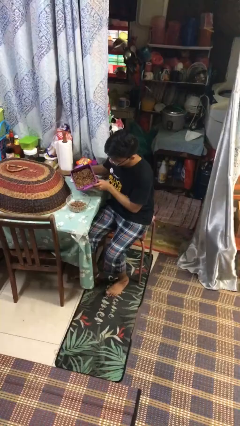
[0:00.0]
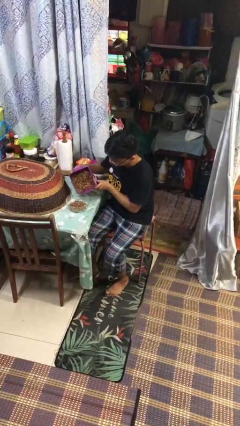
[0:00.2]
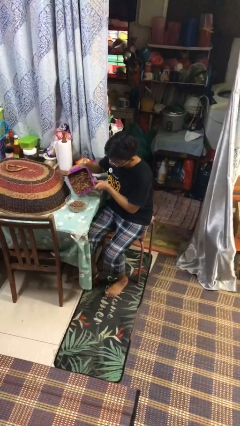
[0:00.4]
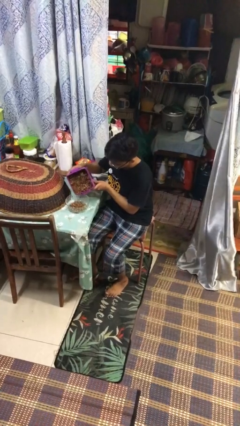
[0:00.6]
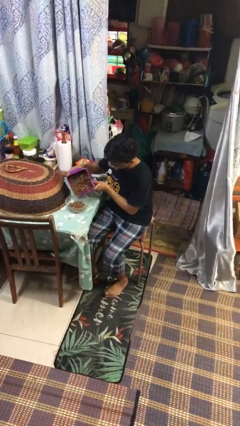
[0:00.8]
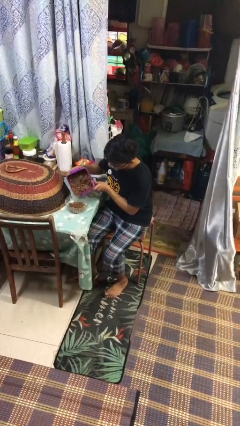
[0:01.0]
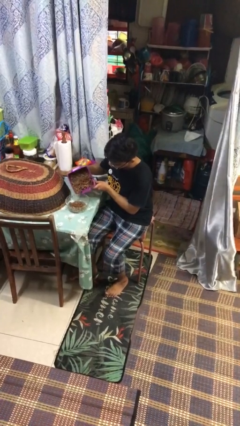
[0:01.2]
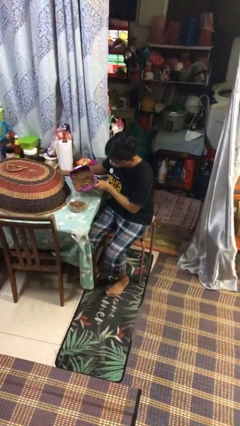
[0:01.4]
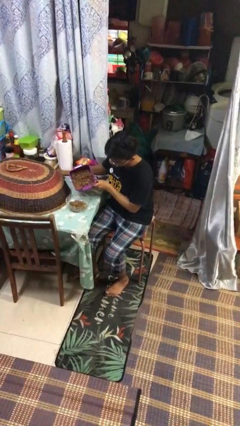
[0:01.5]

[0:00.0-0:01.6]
person pours into bowl

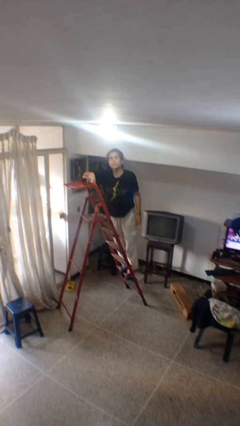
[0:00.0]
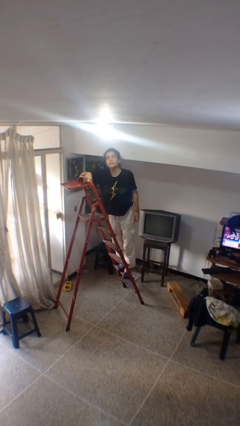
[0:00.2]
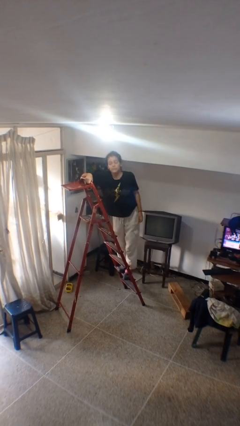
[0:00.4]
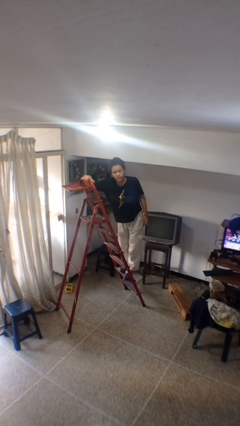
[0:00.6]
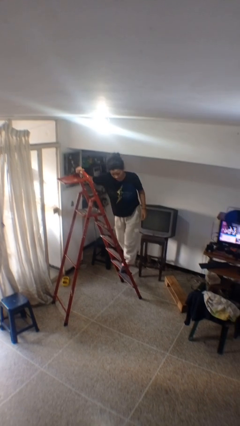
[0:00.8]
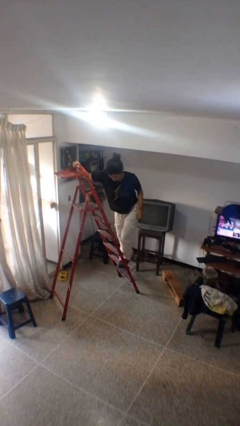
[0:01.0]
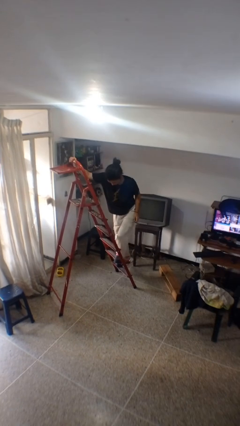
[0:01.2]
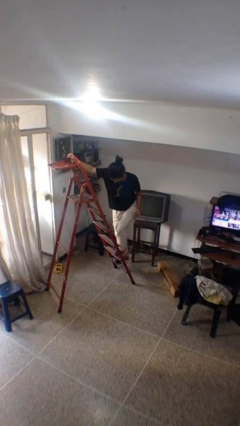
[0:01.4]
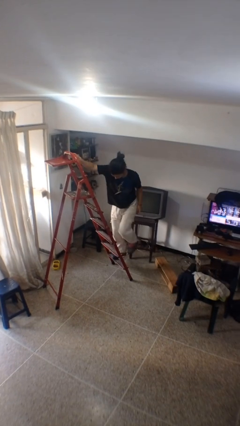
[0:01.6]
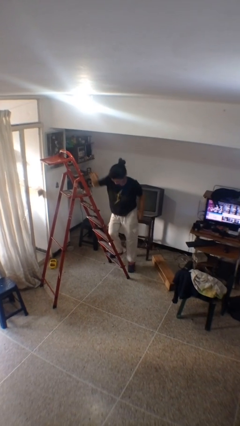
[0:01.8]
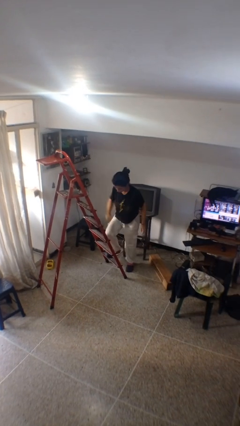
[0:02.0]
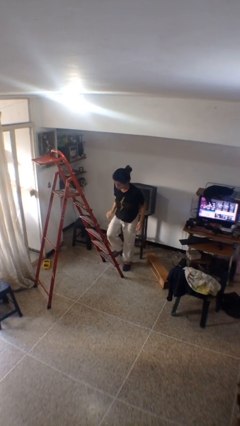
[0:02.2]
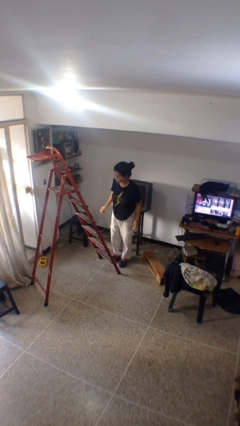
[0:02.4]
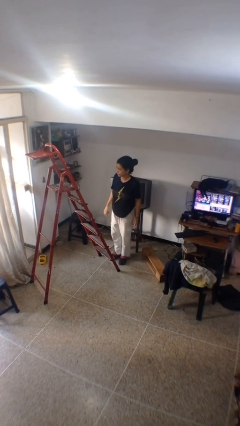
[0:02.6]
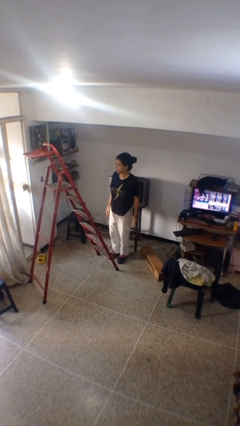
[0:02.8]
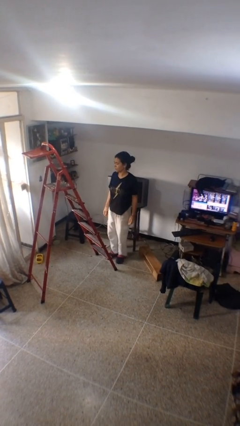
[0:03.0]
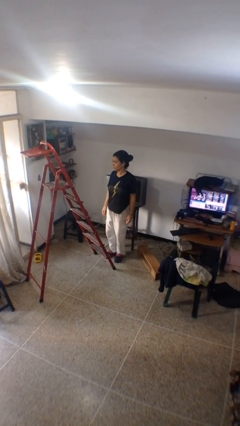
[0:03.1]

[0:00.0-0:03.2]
person climbs down ladder

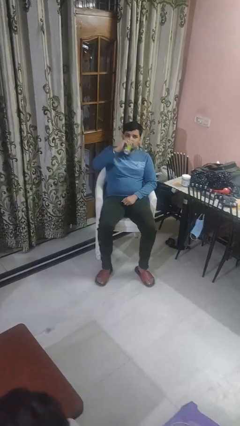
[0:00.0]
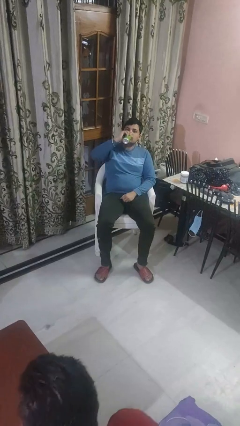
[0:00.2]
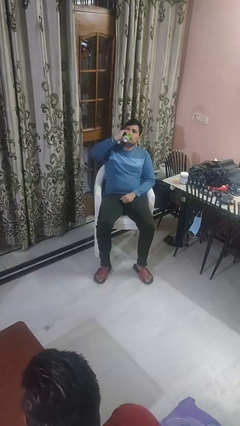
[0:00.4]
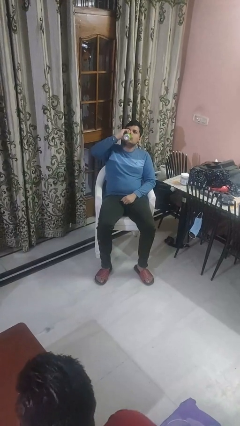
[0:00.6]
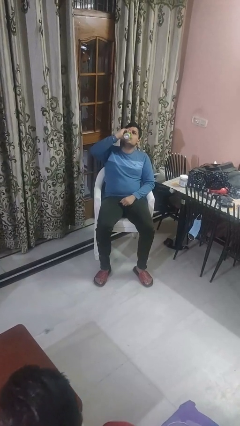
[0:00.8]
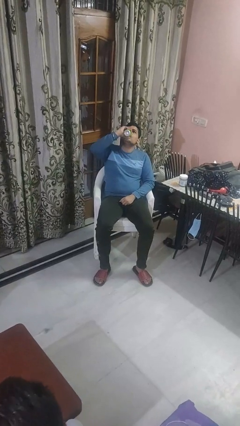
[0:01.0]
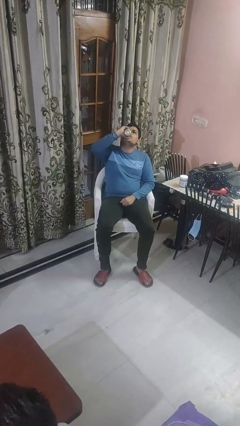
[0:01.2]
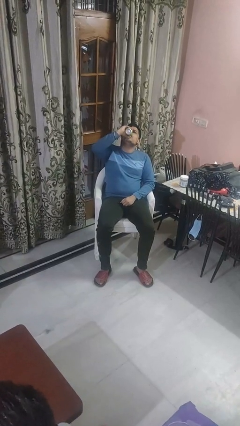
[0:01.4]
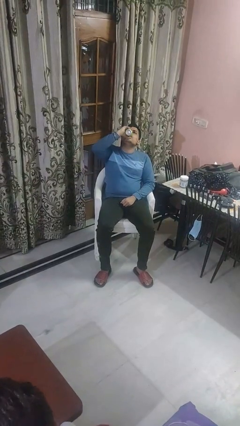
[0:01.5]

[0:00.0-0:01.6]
person drinks from beverage can

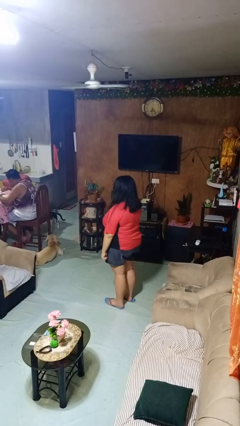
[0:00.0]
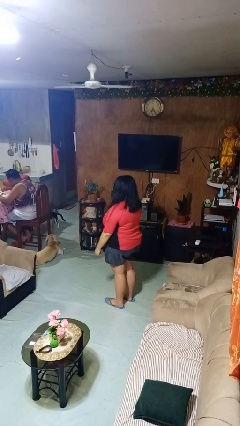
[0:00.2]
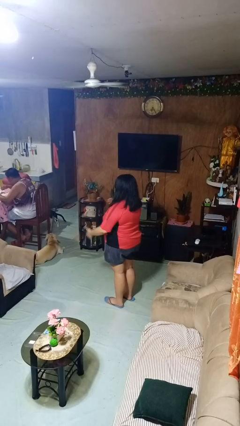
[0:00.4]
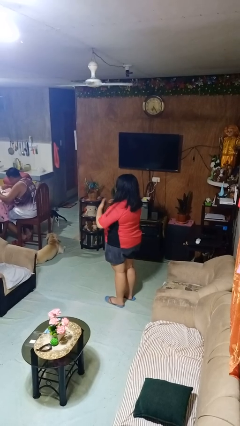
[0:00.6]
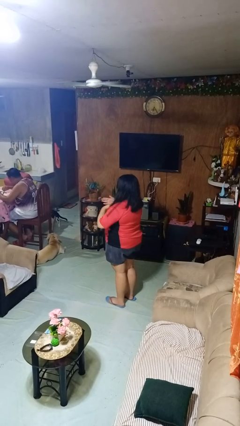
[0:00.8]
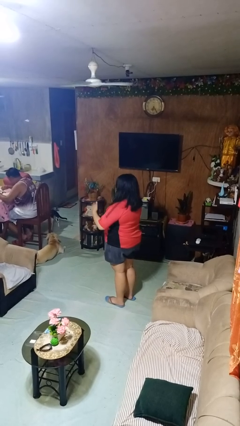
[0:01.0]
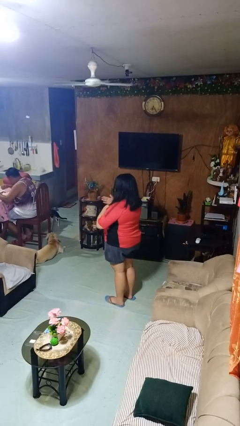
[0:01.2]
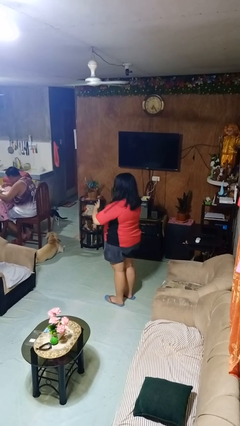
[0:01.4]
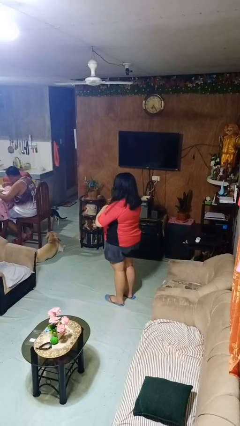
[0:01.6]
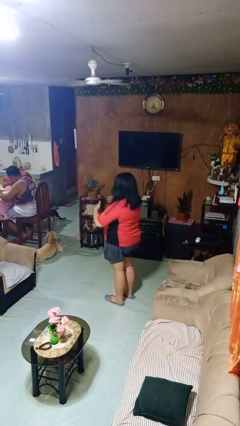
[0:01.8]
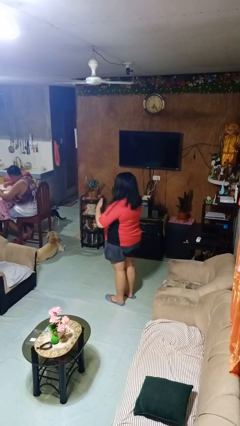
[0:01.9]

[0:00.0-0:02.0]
person drums on chest

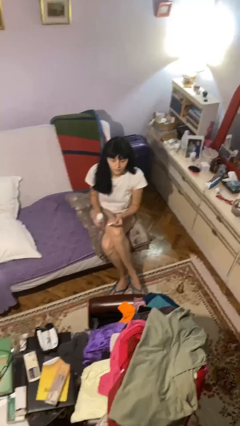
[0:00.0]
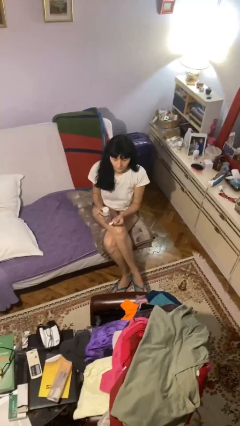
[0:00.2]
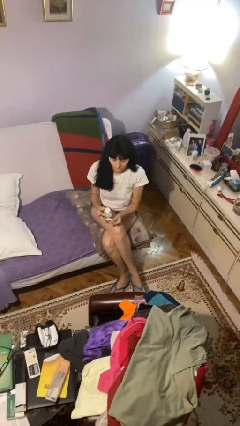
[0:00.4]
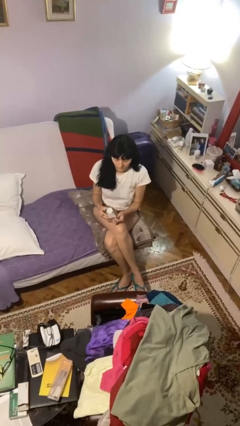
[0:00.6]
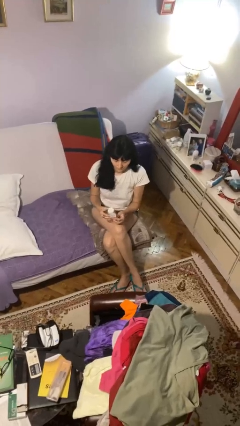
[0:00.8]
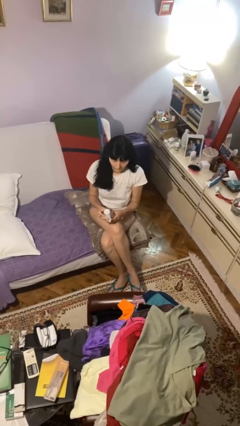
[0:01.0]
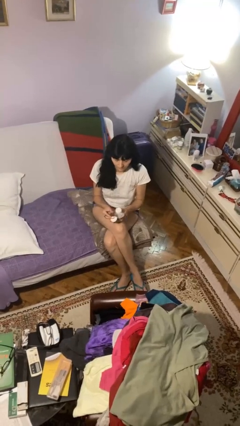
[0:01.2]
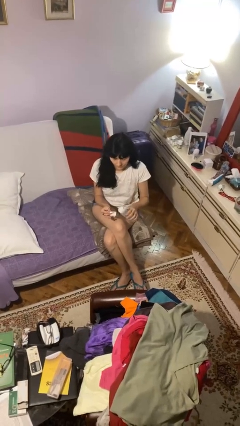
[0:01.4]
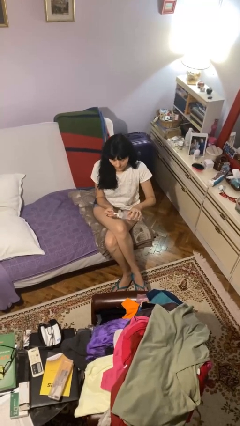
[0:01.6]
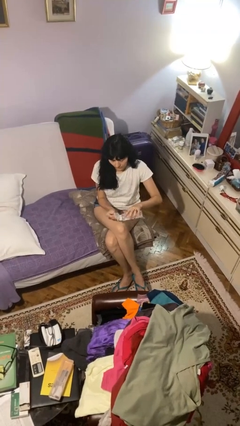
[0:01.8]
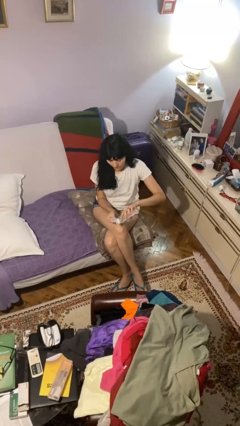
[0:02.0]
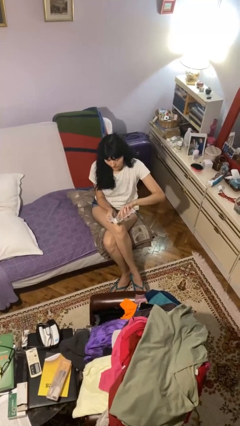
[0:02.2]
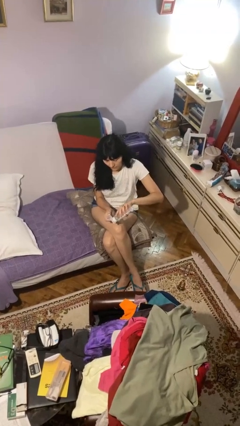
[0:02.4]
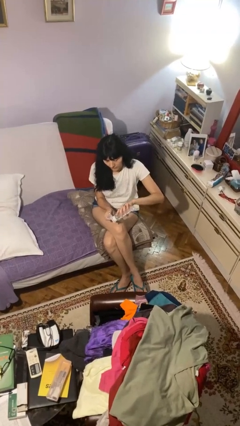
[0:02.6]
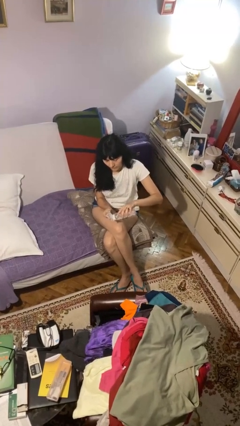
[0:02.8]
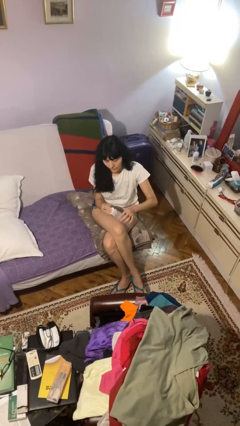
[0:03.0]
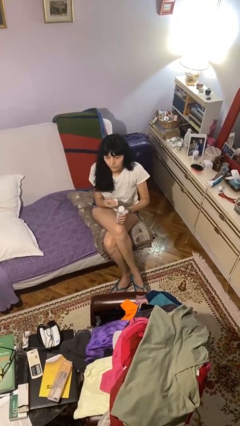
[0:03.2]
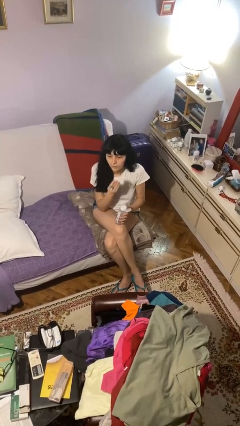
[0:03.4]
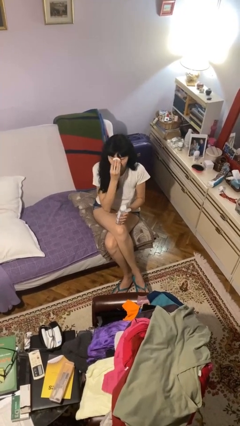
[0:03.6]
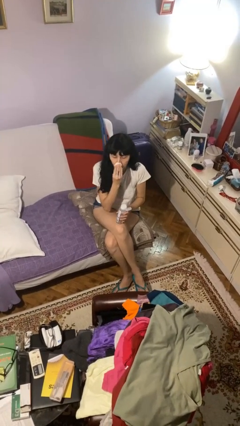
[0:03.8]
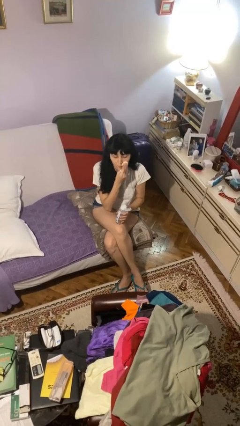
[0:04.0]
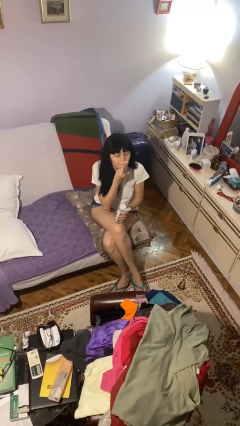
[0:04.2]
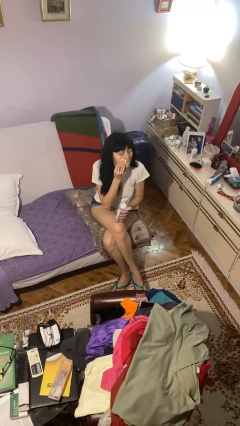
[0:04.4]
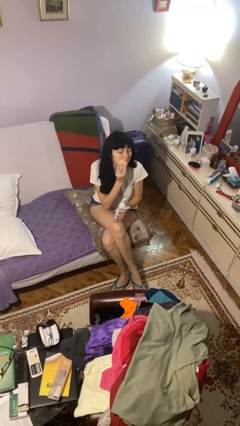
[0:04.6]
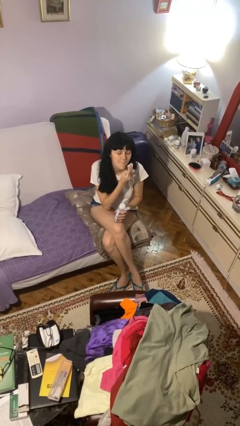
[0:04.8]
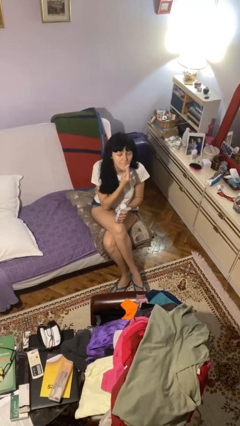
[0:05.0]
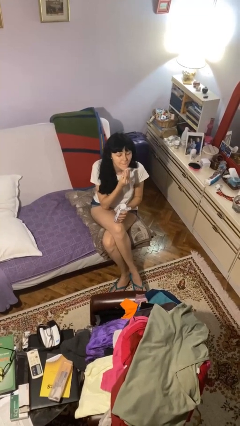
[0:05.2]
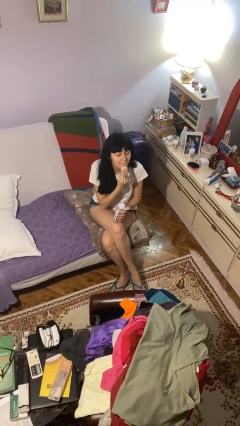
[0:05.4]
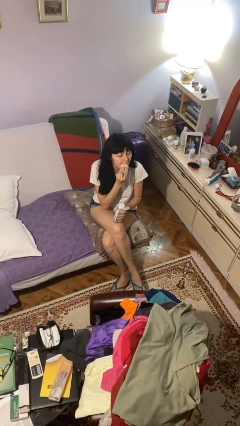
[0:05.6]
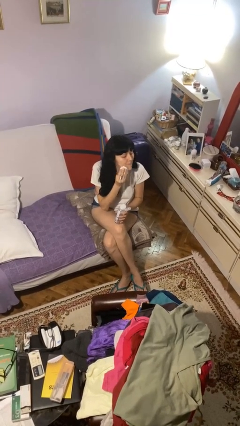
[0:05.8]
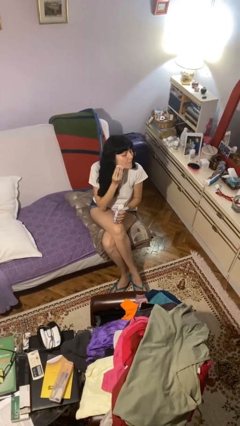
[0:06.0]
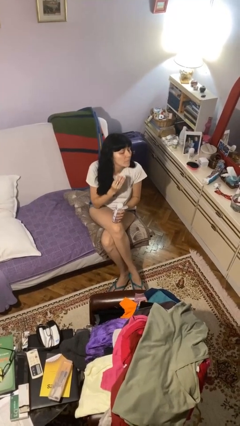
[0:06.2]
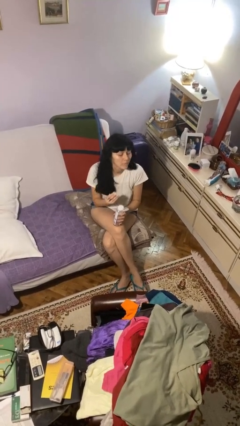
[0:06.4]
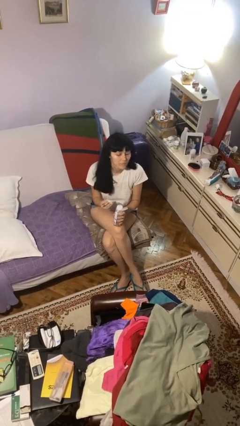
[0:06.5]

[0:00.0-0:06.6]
person applies facial moisturizer

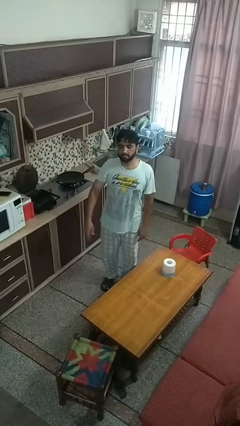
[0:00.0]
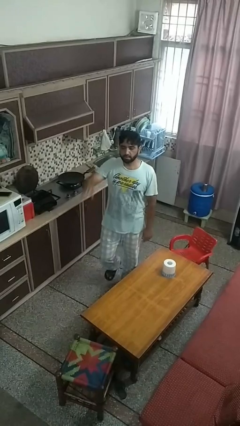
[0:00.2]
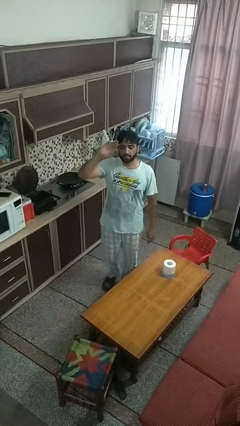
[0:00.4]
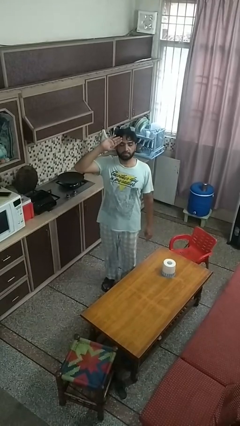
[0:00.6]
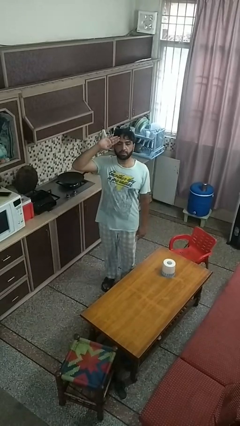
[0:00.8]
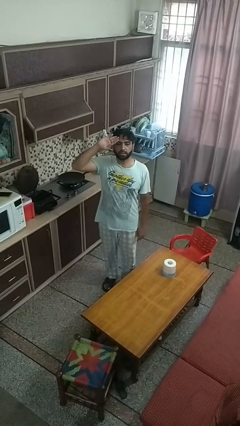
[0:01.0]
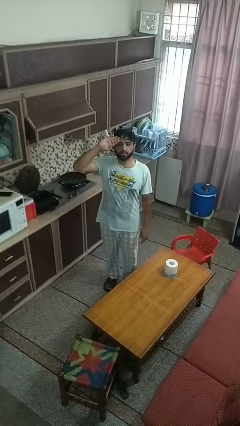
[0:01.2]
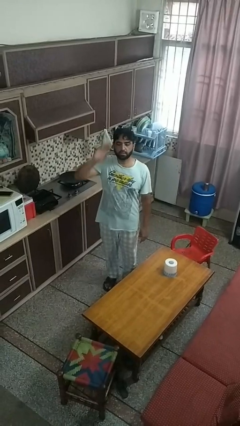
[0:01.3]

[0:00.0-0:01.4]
person salutes

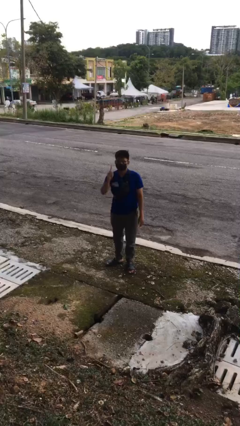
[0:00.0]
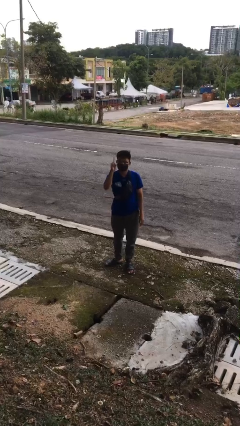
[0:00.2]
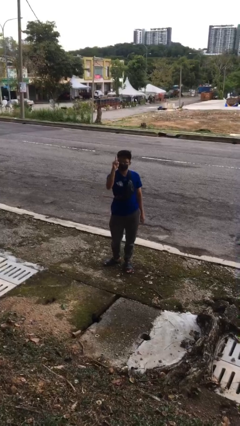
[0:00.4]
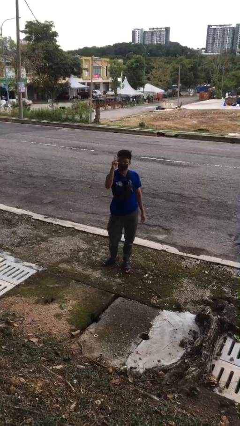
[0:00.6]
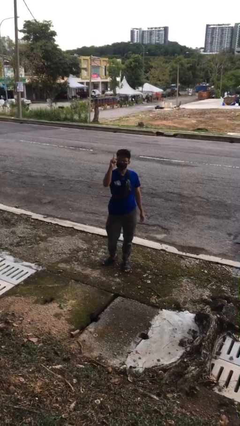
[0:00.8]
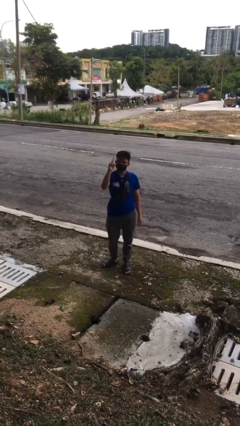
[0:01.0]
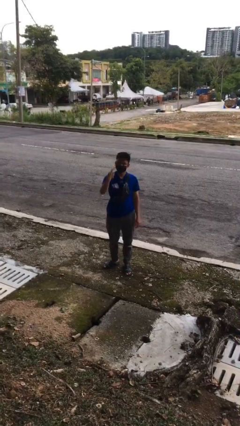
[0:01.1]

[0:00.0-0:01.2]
person gestures number one
